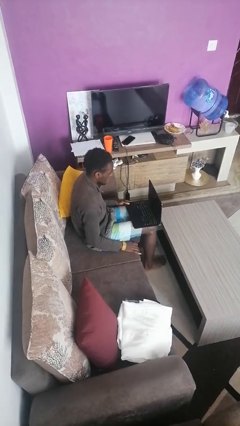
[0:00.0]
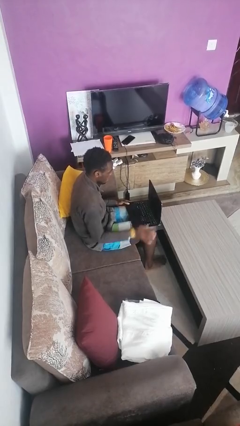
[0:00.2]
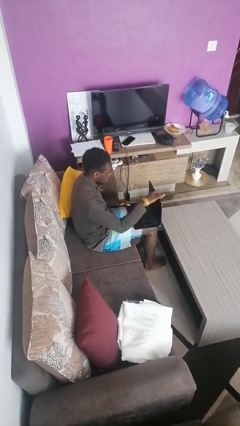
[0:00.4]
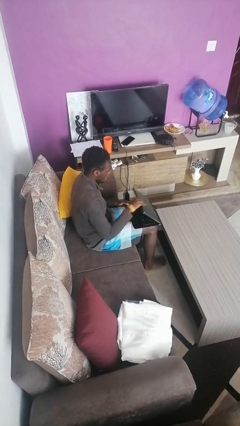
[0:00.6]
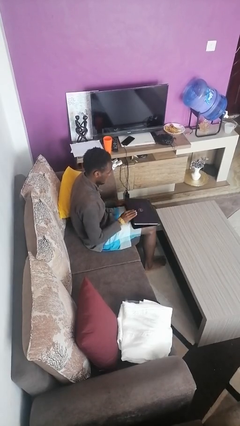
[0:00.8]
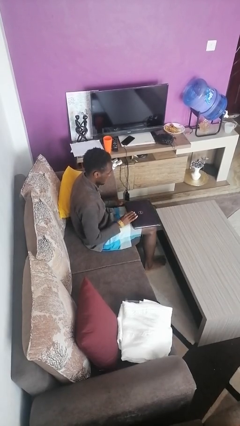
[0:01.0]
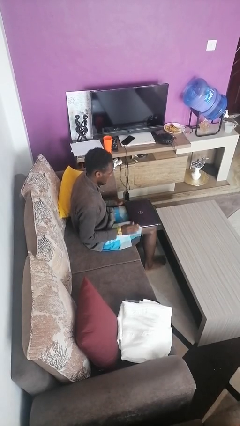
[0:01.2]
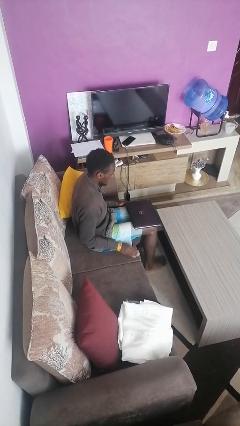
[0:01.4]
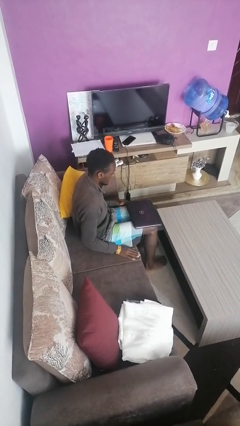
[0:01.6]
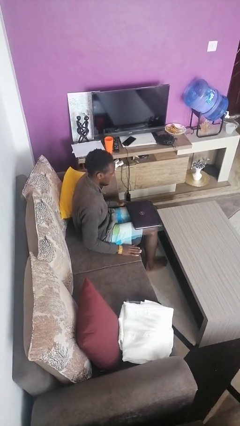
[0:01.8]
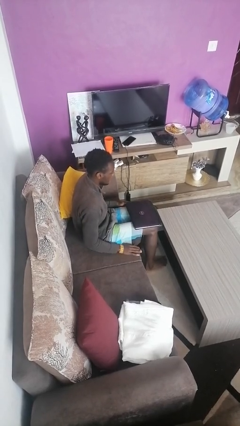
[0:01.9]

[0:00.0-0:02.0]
person closes laptop

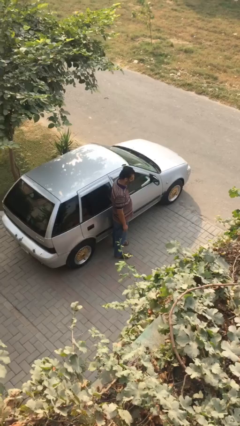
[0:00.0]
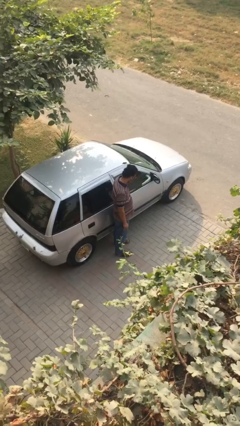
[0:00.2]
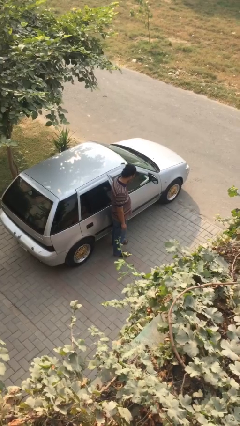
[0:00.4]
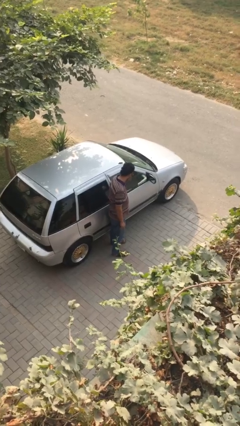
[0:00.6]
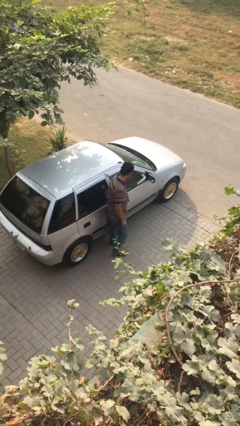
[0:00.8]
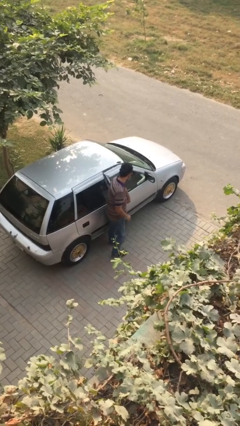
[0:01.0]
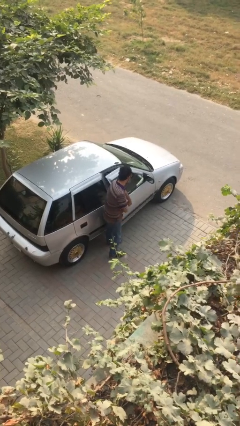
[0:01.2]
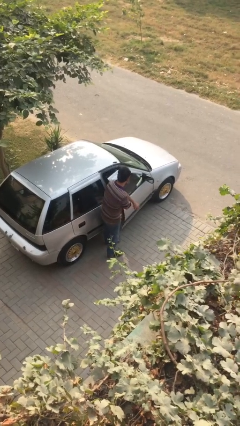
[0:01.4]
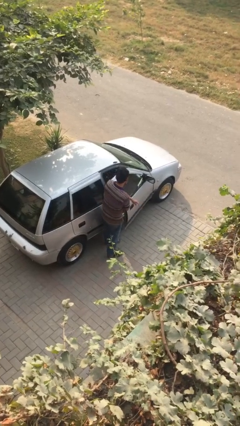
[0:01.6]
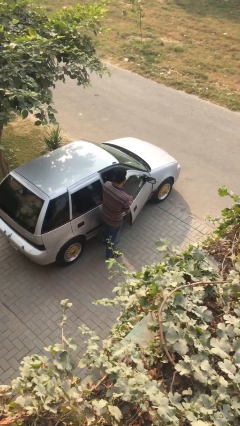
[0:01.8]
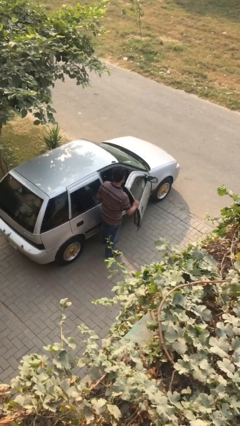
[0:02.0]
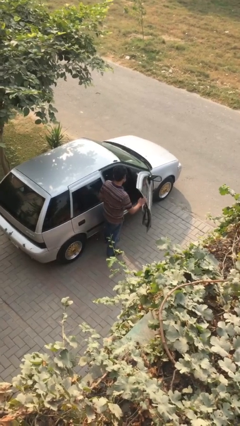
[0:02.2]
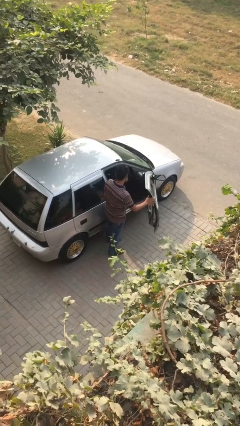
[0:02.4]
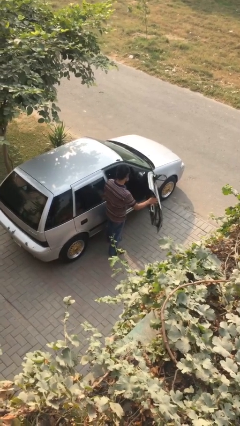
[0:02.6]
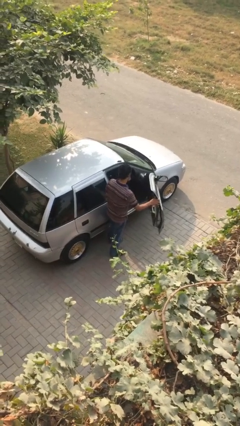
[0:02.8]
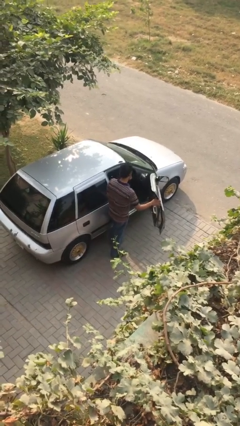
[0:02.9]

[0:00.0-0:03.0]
person opens car door

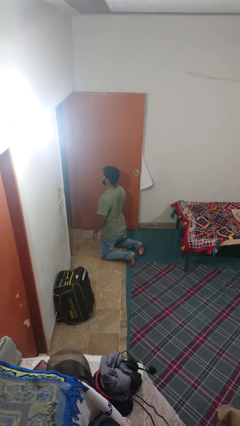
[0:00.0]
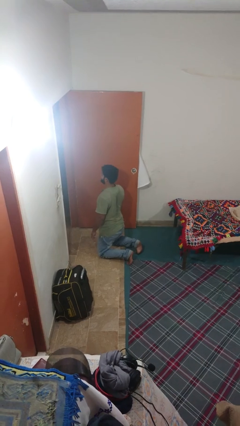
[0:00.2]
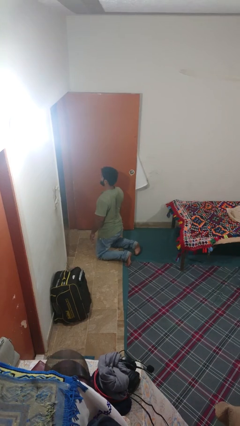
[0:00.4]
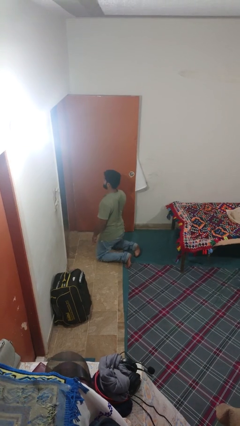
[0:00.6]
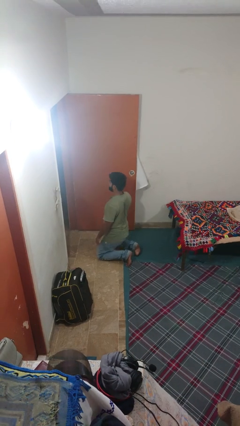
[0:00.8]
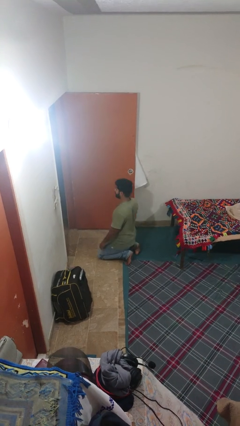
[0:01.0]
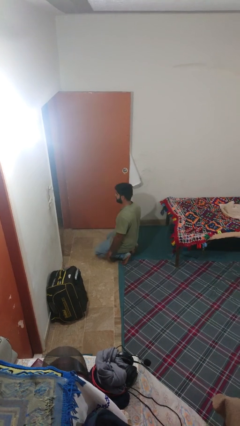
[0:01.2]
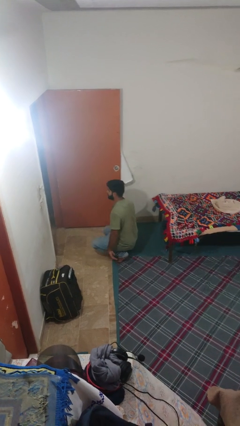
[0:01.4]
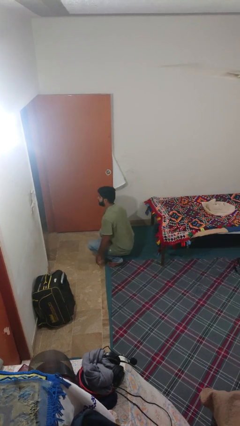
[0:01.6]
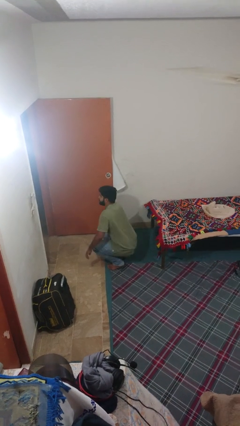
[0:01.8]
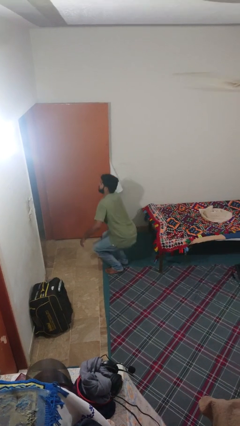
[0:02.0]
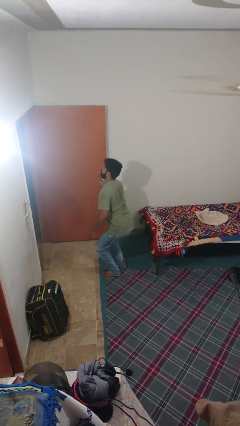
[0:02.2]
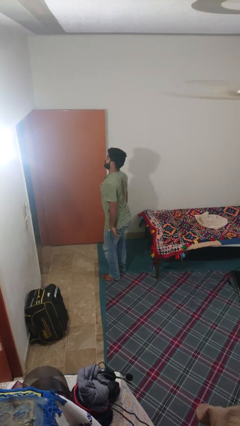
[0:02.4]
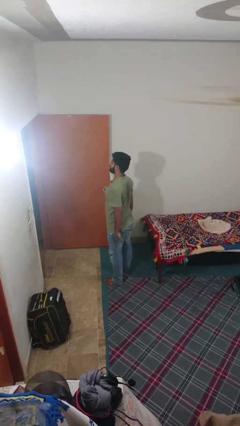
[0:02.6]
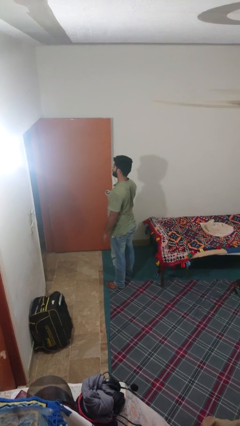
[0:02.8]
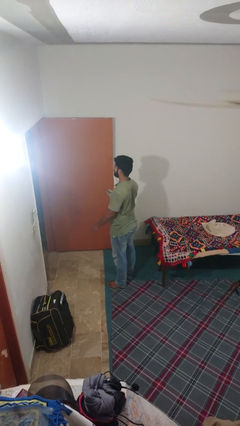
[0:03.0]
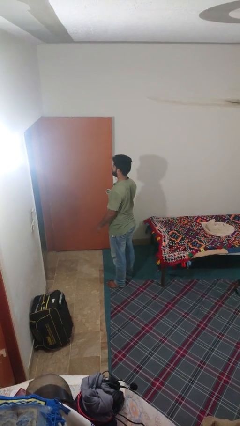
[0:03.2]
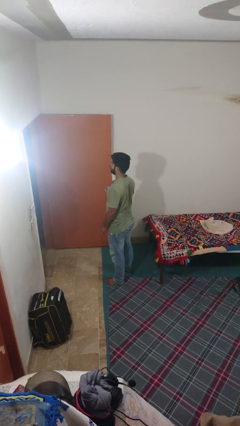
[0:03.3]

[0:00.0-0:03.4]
person stands up from floor

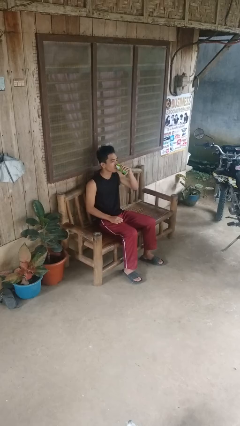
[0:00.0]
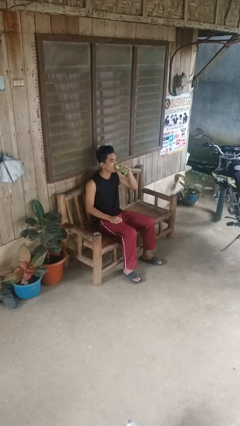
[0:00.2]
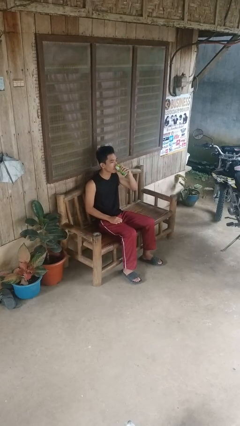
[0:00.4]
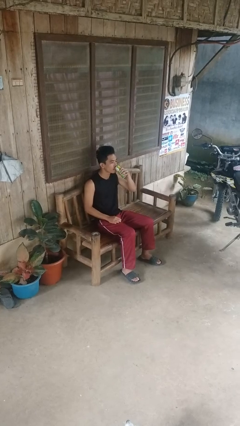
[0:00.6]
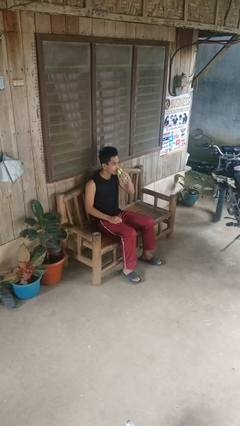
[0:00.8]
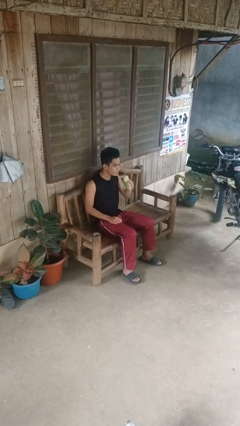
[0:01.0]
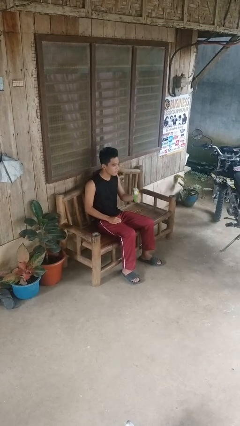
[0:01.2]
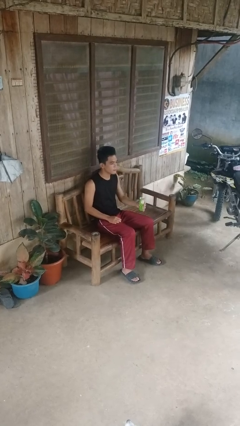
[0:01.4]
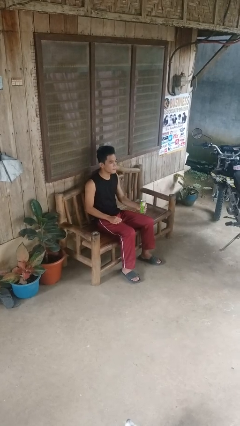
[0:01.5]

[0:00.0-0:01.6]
person drinks from beverage can

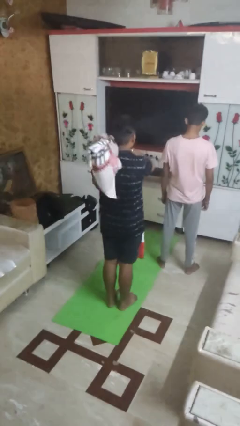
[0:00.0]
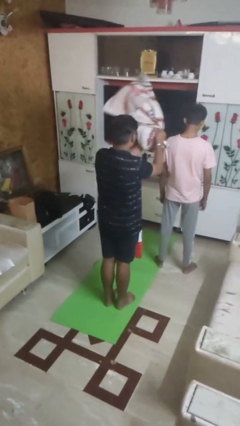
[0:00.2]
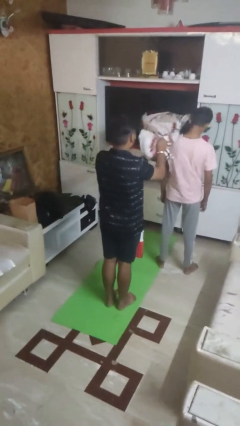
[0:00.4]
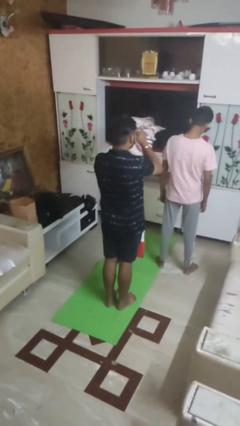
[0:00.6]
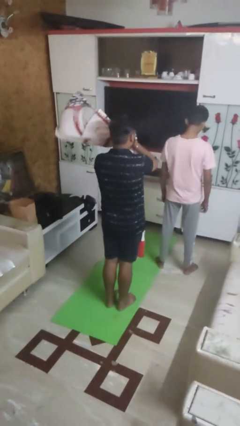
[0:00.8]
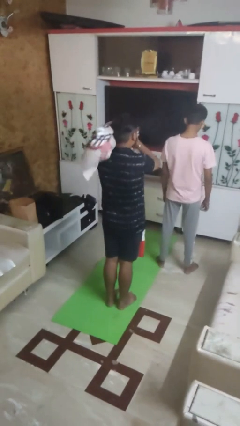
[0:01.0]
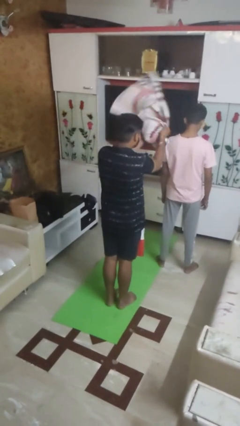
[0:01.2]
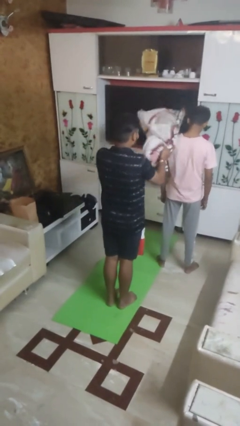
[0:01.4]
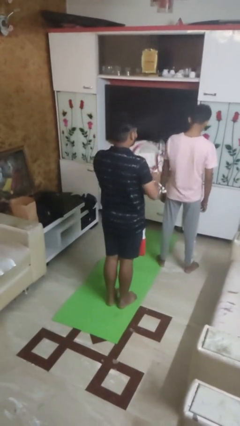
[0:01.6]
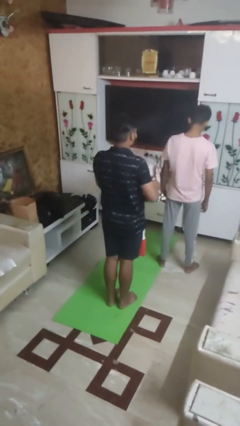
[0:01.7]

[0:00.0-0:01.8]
person hits person with pillow

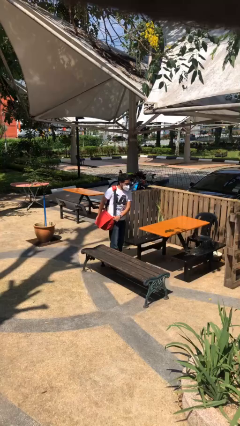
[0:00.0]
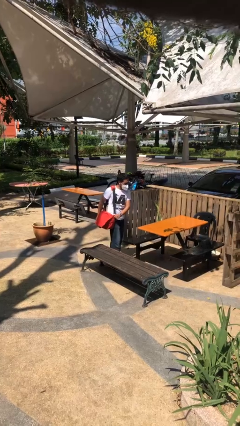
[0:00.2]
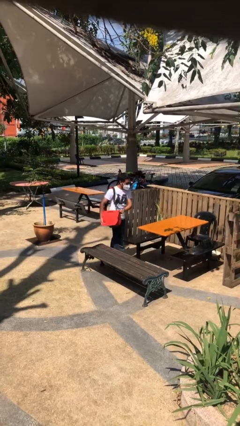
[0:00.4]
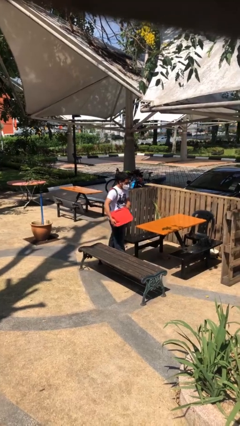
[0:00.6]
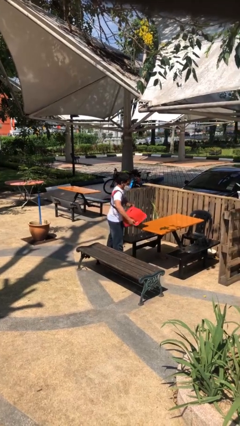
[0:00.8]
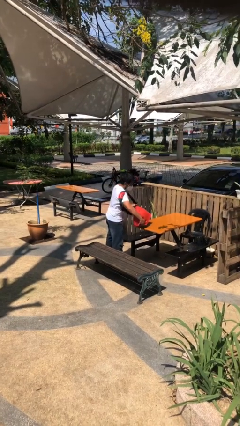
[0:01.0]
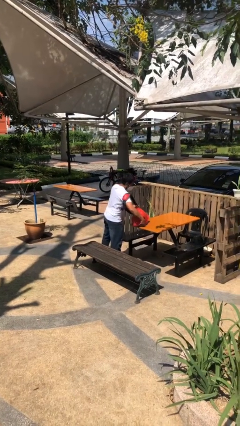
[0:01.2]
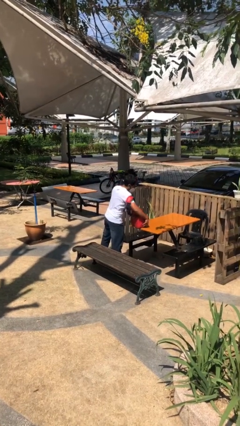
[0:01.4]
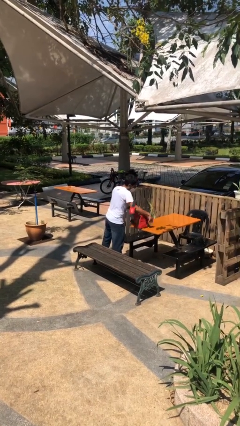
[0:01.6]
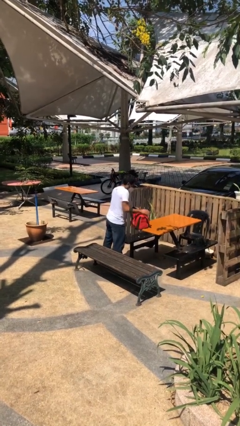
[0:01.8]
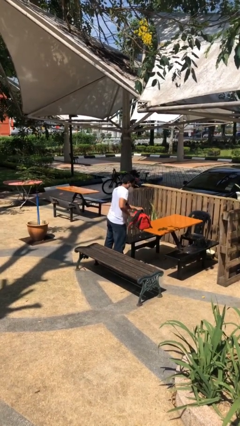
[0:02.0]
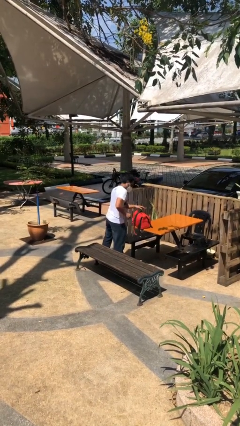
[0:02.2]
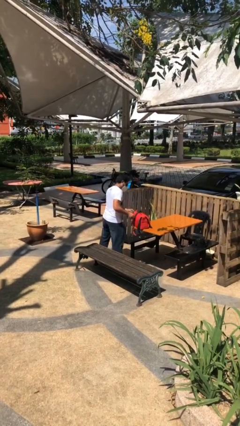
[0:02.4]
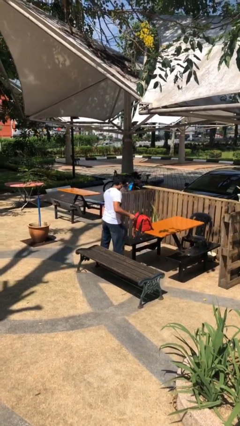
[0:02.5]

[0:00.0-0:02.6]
person puts down object on table

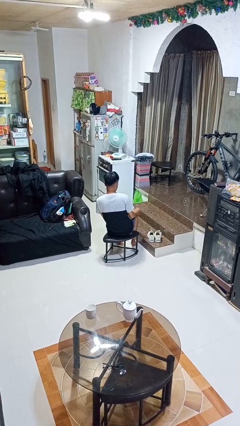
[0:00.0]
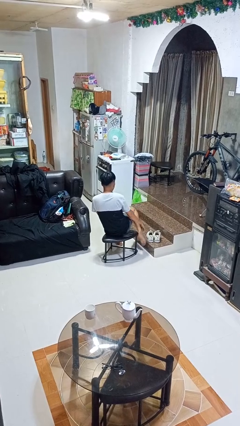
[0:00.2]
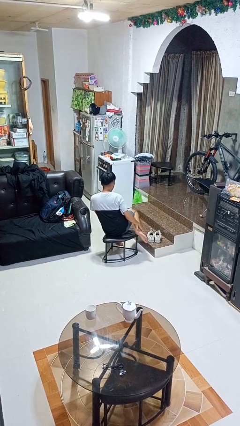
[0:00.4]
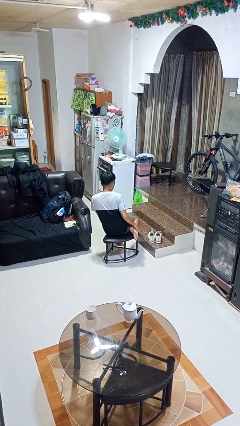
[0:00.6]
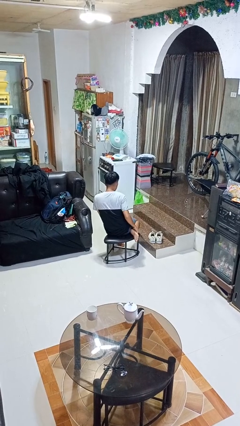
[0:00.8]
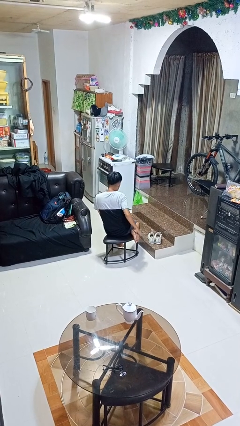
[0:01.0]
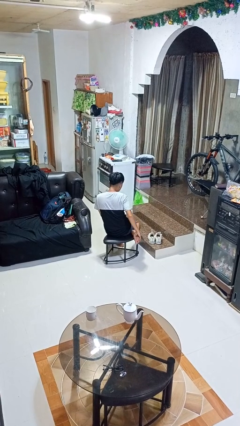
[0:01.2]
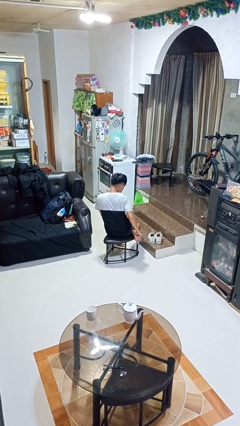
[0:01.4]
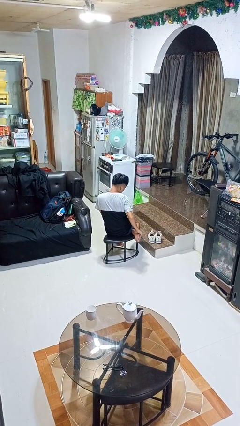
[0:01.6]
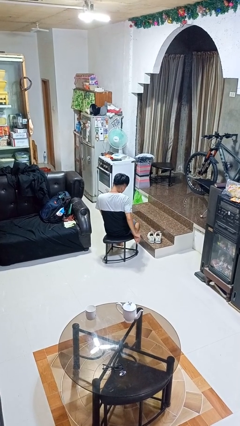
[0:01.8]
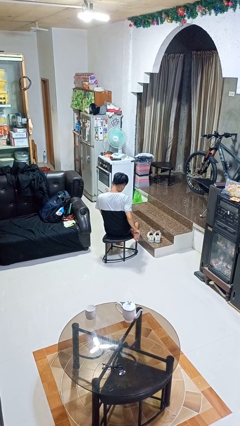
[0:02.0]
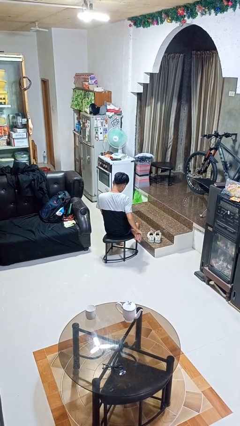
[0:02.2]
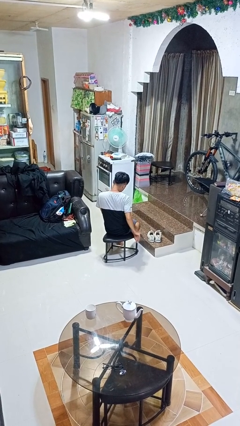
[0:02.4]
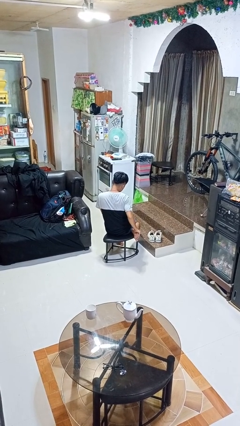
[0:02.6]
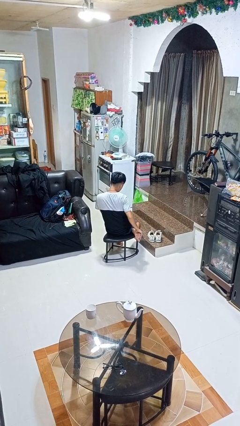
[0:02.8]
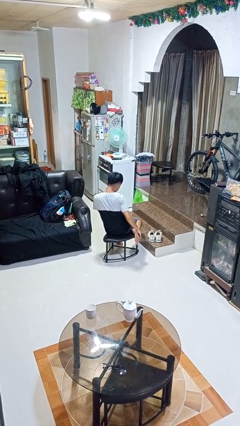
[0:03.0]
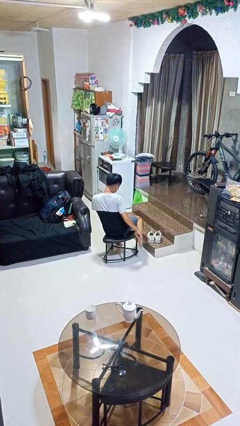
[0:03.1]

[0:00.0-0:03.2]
person rubs foot
